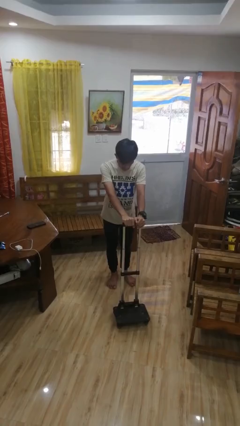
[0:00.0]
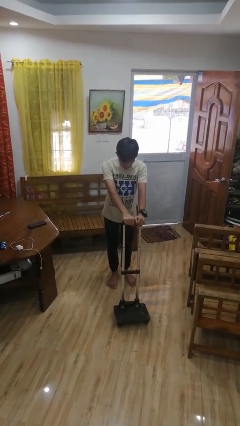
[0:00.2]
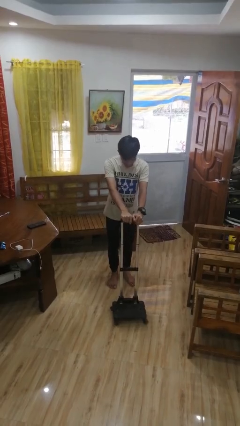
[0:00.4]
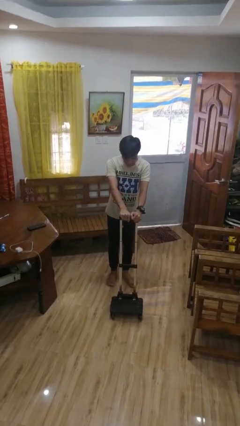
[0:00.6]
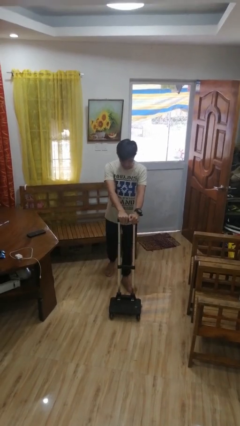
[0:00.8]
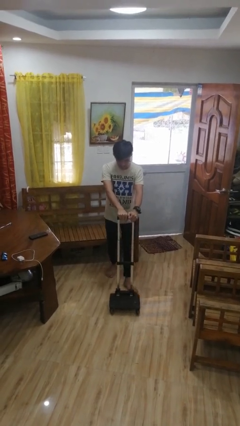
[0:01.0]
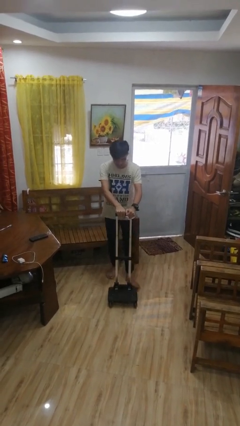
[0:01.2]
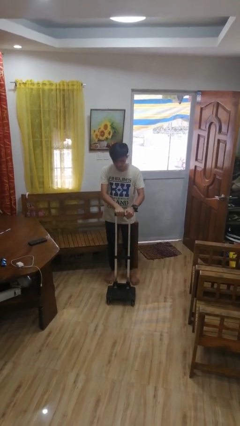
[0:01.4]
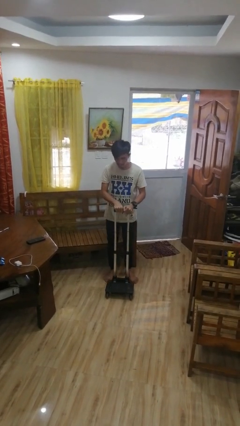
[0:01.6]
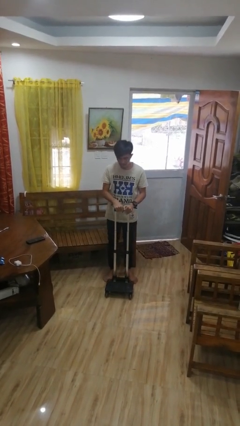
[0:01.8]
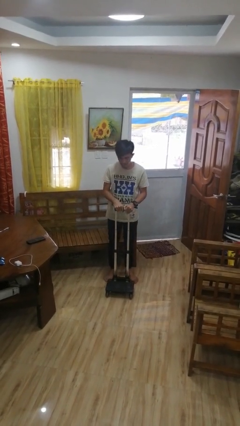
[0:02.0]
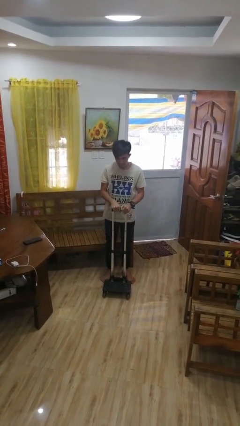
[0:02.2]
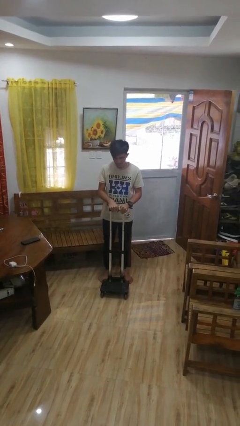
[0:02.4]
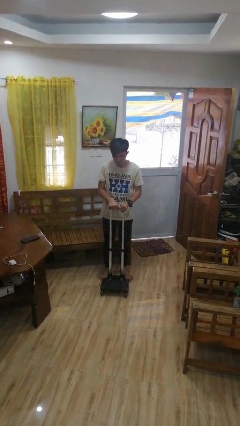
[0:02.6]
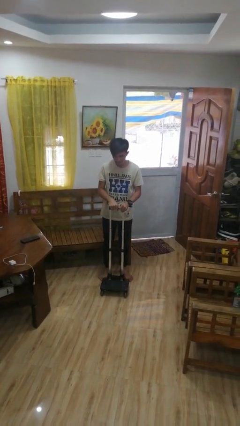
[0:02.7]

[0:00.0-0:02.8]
person pulls wheeled cart

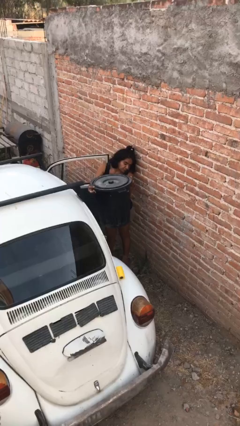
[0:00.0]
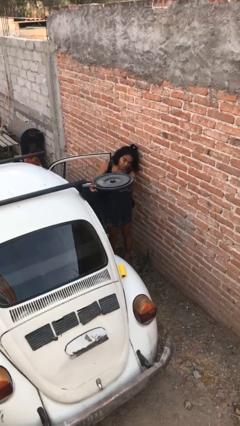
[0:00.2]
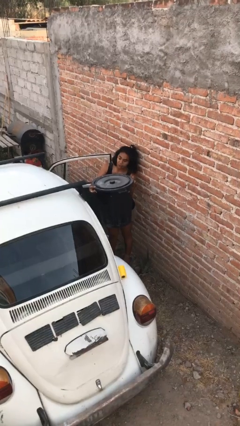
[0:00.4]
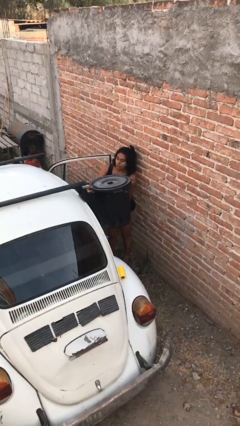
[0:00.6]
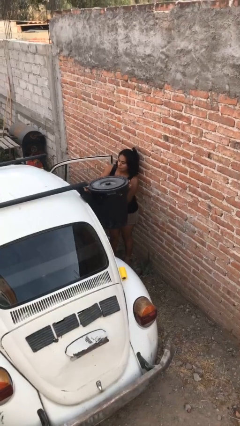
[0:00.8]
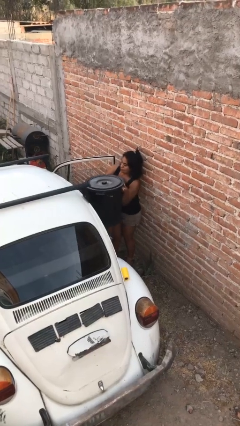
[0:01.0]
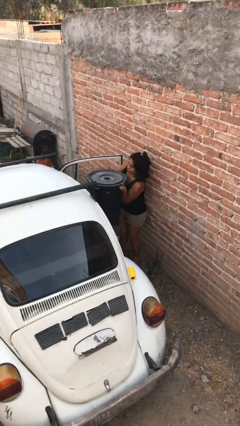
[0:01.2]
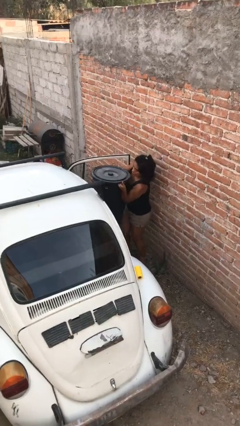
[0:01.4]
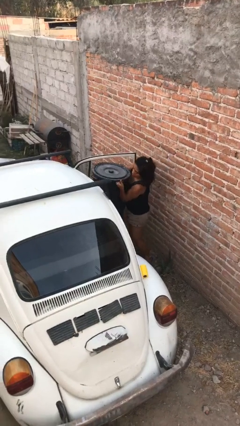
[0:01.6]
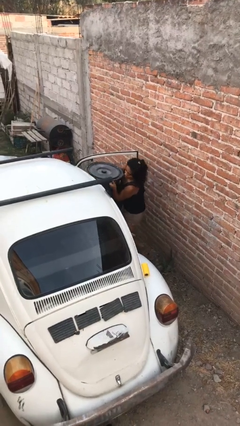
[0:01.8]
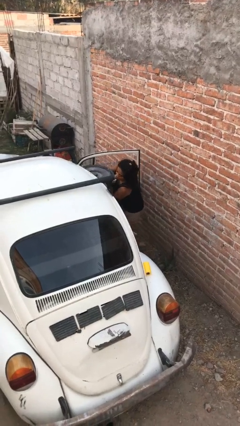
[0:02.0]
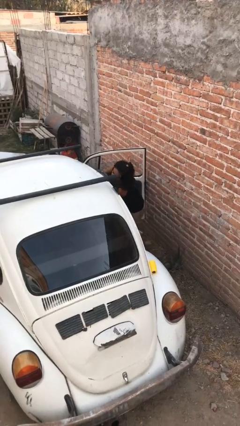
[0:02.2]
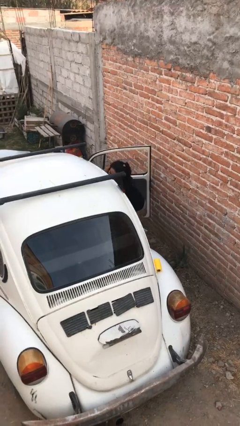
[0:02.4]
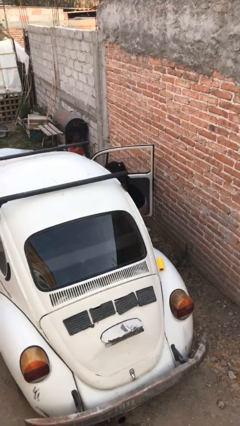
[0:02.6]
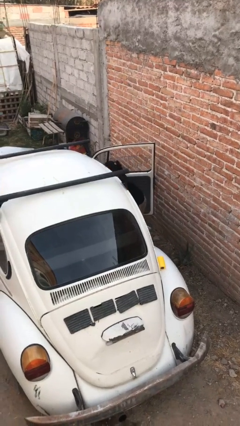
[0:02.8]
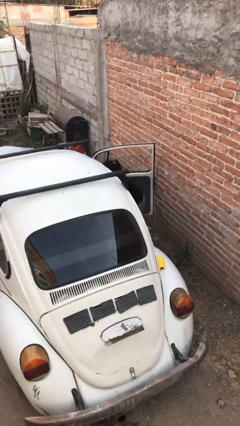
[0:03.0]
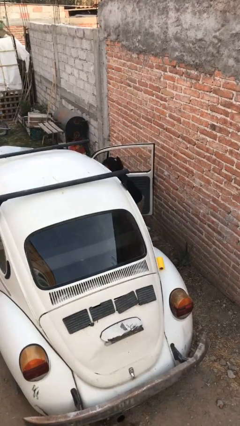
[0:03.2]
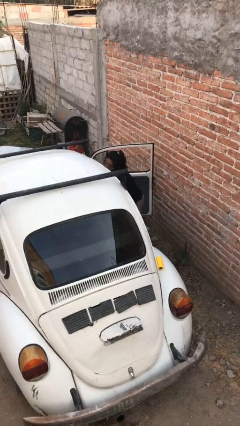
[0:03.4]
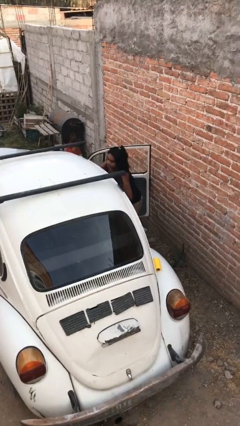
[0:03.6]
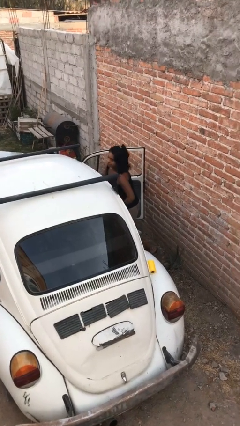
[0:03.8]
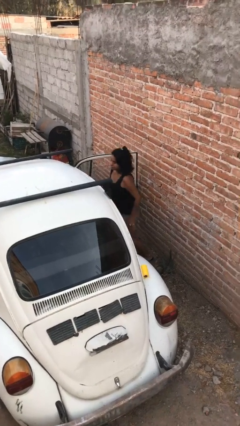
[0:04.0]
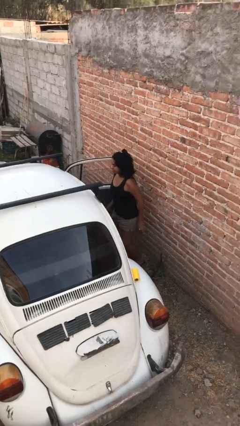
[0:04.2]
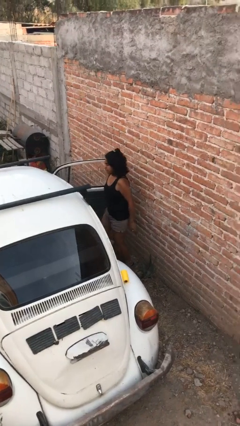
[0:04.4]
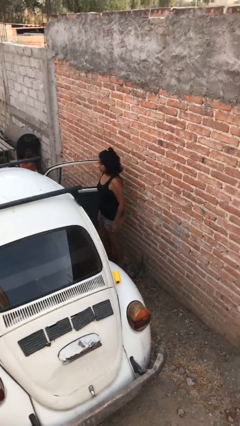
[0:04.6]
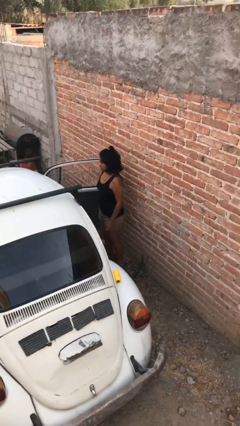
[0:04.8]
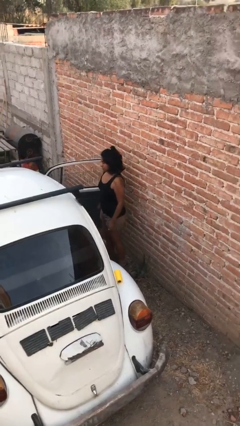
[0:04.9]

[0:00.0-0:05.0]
person loads car

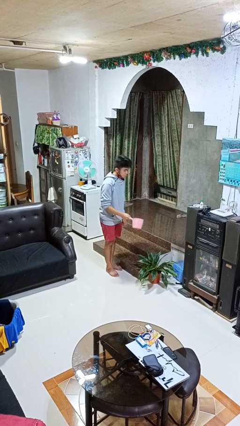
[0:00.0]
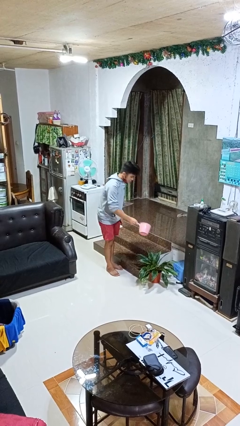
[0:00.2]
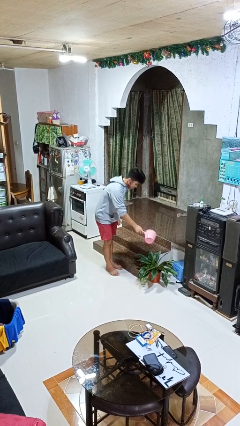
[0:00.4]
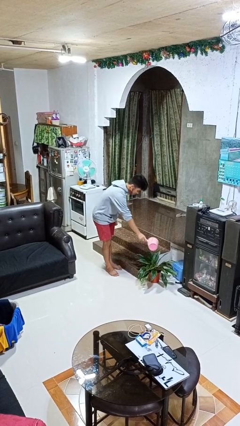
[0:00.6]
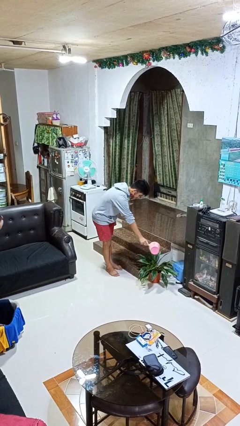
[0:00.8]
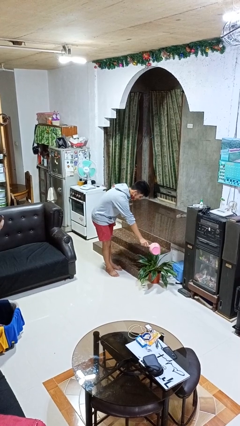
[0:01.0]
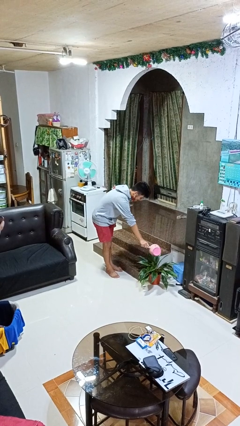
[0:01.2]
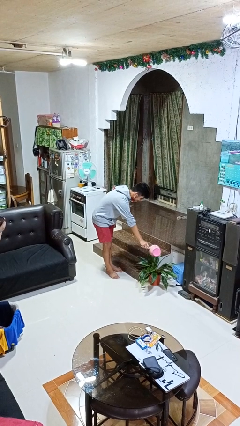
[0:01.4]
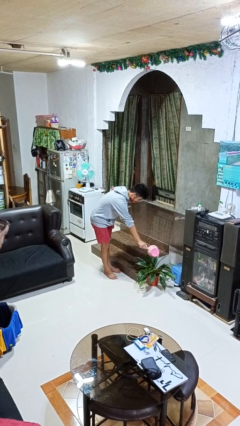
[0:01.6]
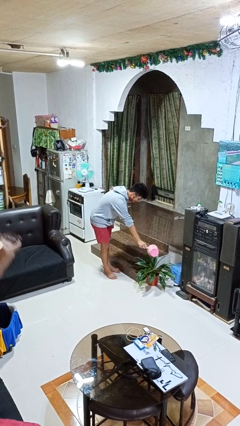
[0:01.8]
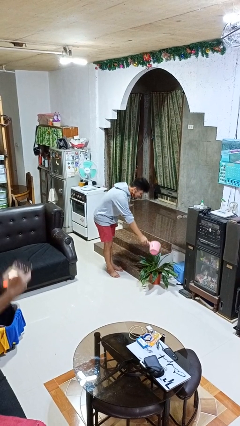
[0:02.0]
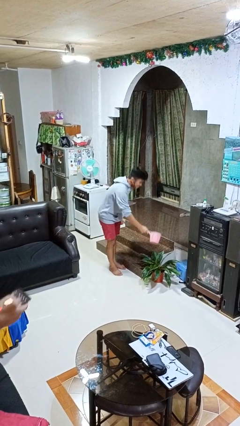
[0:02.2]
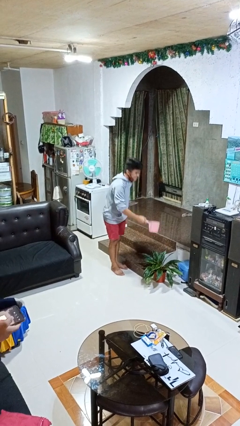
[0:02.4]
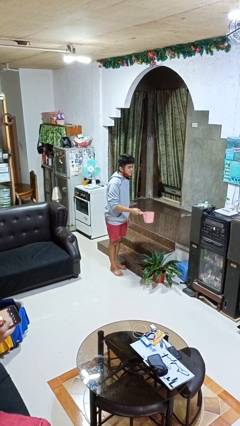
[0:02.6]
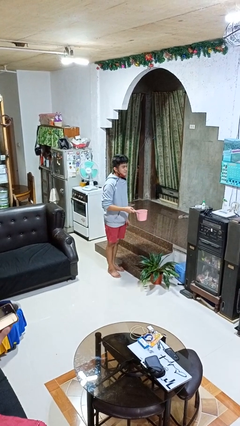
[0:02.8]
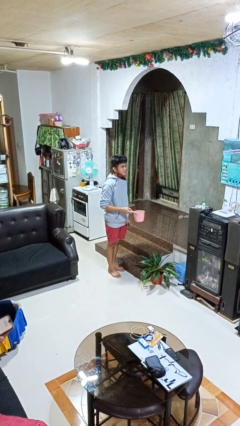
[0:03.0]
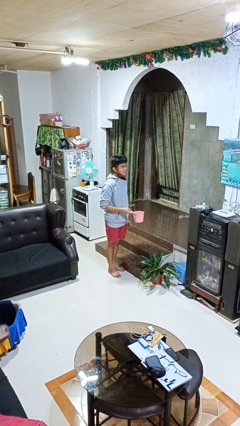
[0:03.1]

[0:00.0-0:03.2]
person waters houseplant

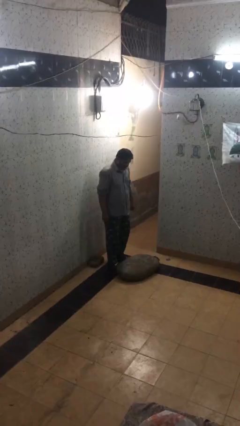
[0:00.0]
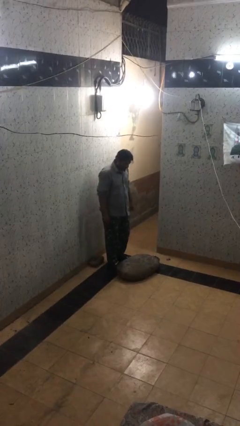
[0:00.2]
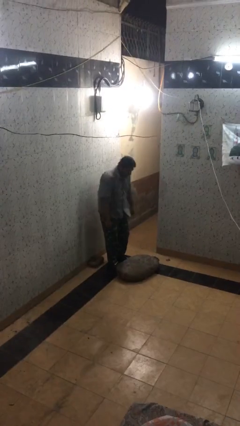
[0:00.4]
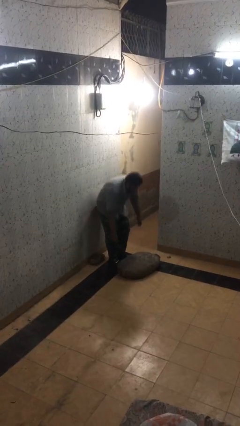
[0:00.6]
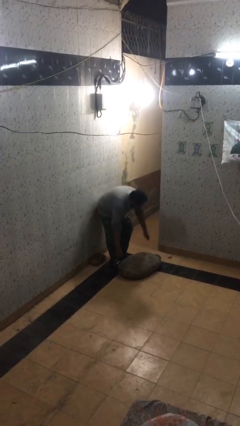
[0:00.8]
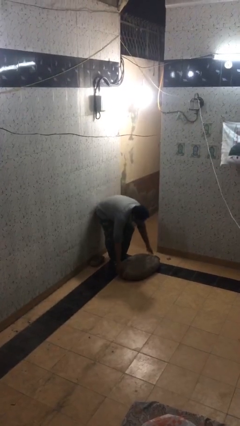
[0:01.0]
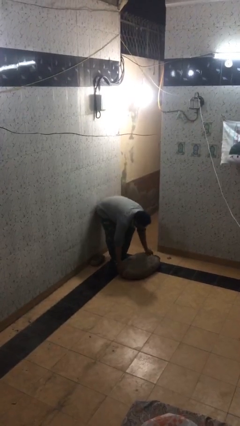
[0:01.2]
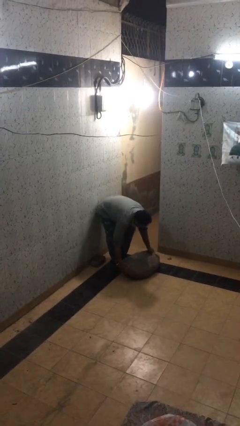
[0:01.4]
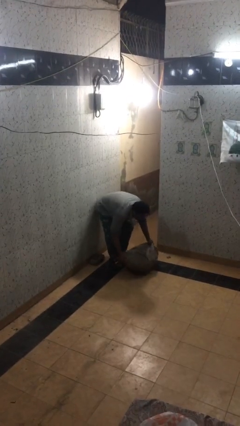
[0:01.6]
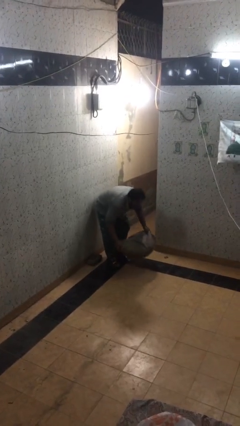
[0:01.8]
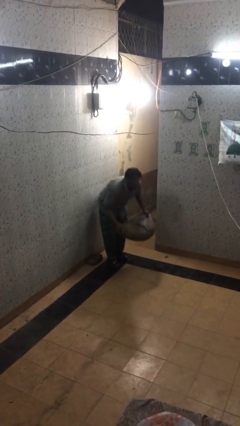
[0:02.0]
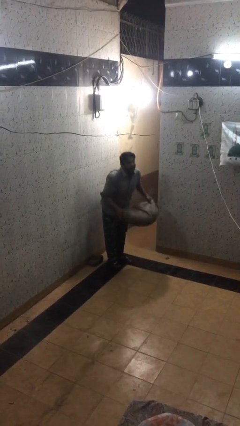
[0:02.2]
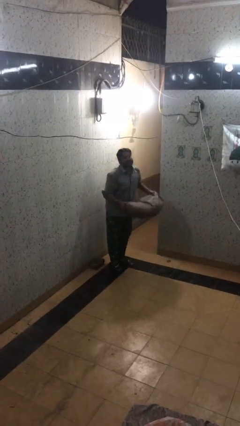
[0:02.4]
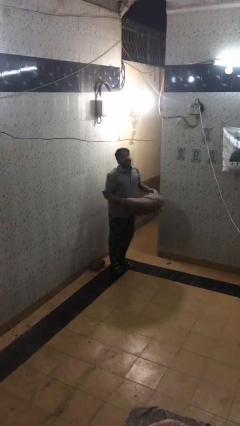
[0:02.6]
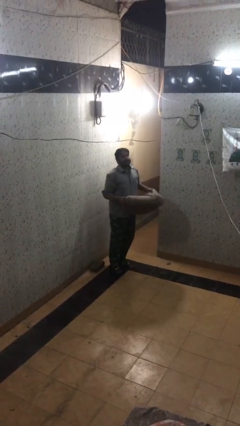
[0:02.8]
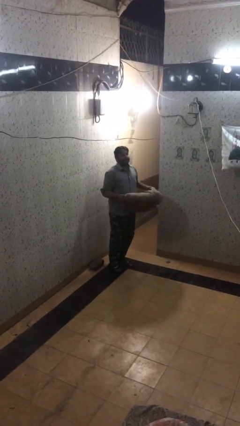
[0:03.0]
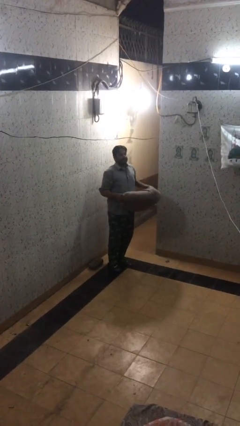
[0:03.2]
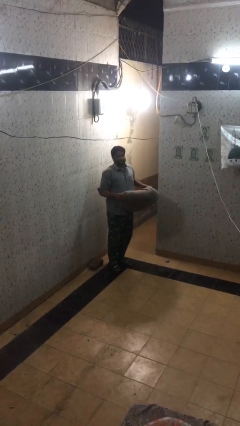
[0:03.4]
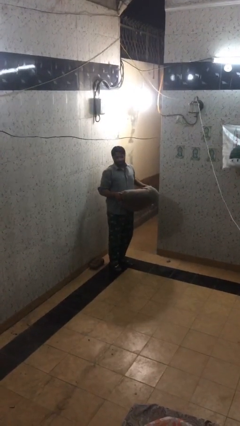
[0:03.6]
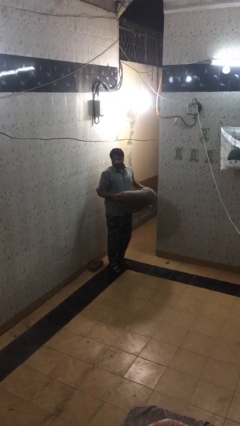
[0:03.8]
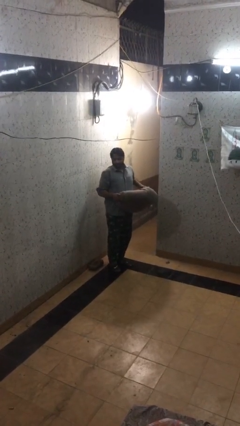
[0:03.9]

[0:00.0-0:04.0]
person picks up object from floor

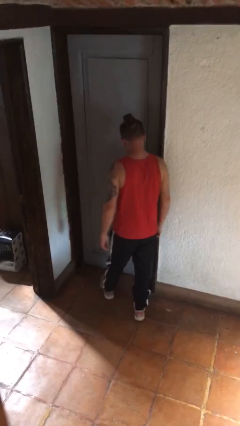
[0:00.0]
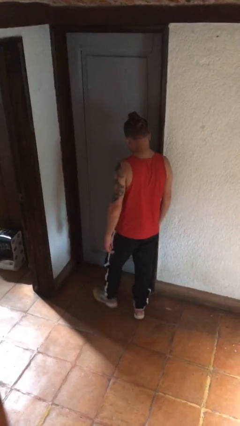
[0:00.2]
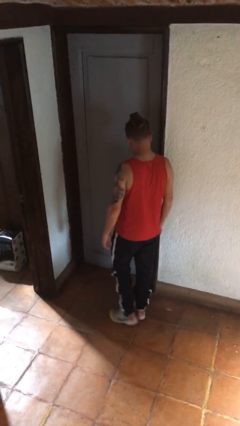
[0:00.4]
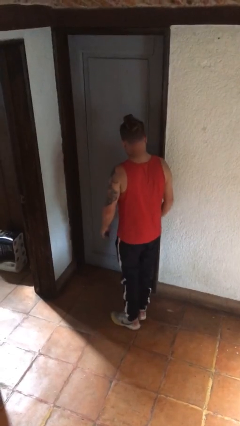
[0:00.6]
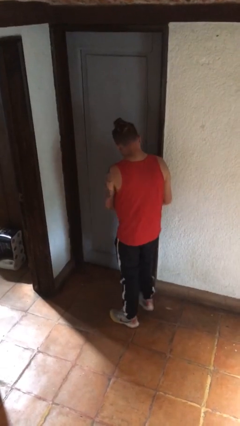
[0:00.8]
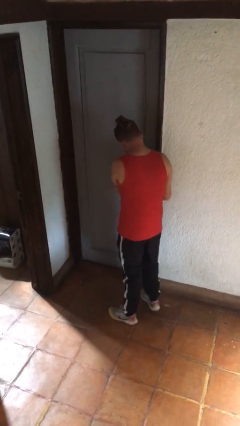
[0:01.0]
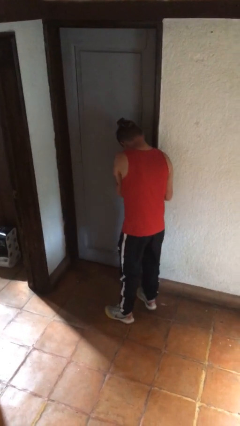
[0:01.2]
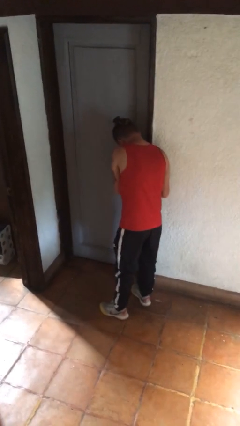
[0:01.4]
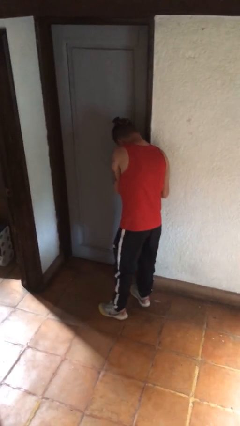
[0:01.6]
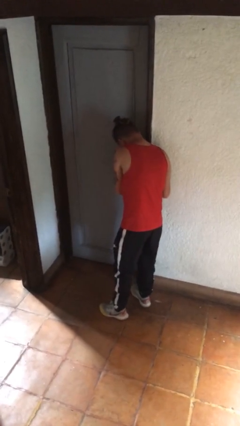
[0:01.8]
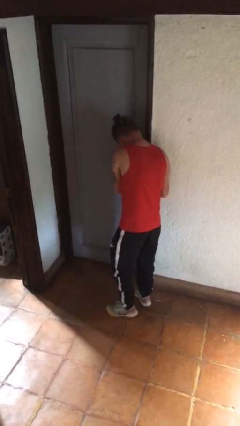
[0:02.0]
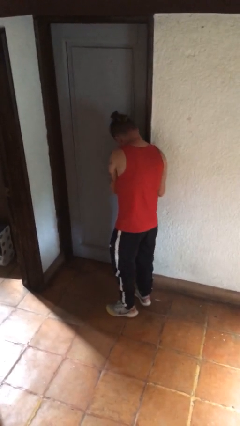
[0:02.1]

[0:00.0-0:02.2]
person unlocks door with keys

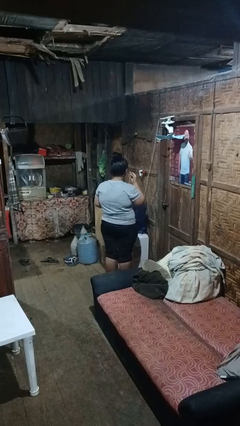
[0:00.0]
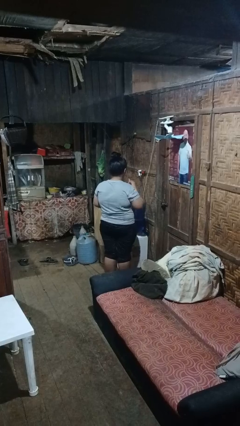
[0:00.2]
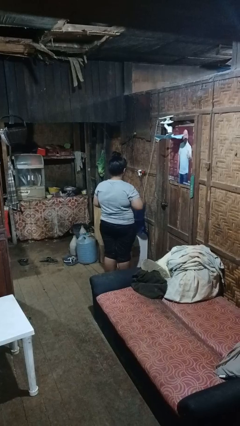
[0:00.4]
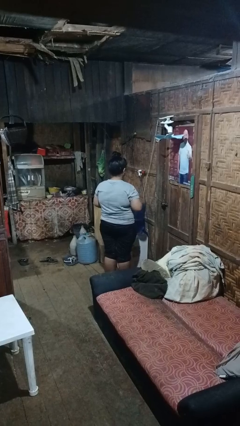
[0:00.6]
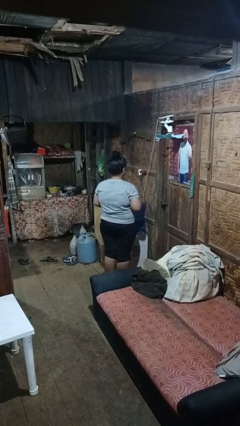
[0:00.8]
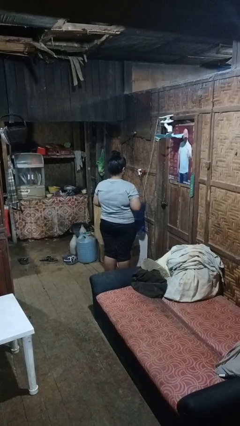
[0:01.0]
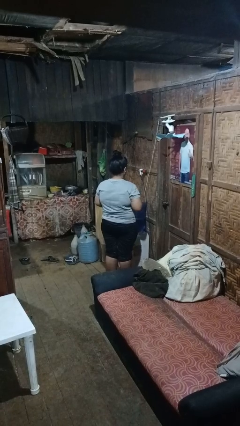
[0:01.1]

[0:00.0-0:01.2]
person takes off headphones
